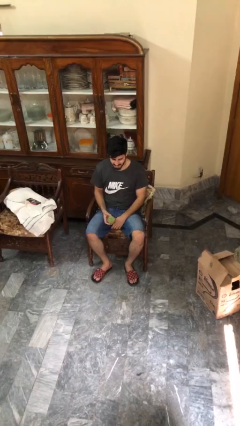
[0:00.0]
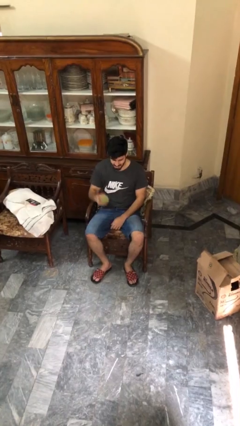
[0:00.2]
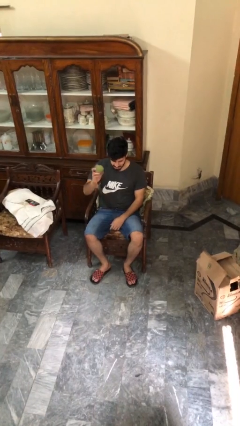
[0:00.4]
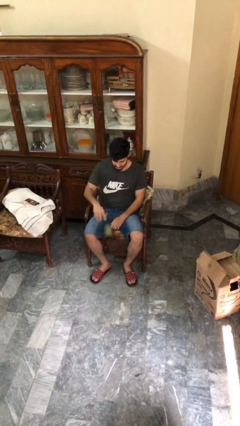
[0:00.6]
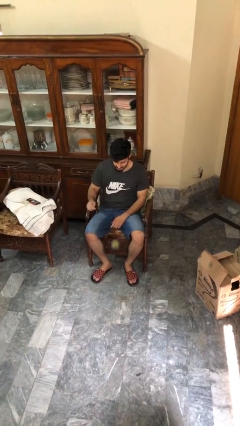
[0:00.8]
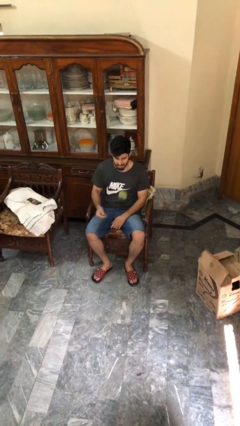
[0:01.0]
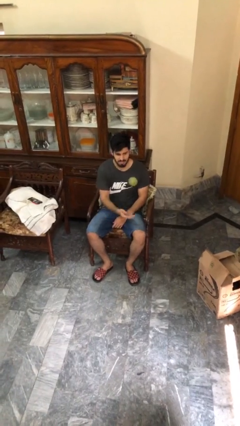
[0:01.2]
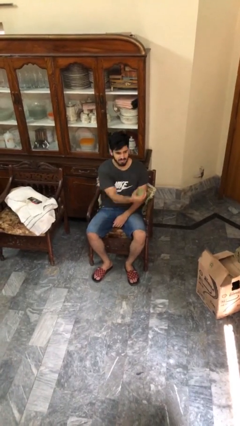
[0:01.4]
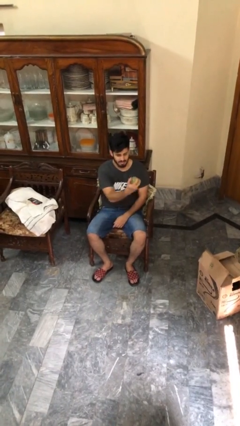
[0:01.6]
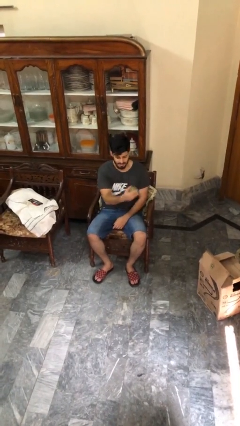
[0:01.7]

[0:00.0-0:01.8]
person bounces ball on floor

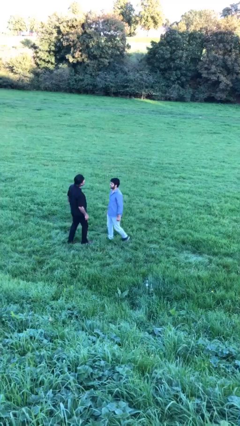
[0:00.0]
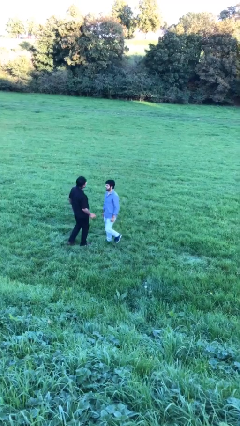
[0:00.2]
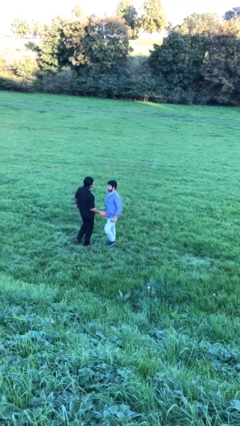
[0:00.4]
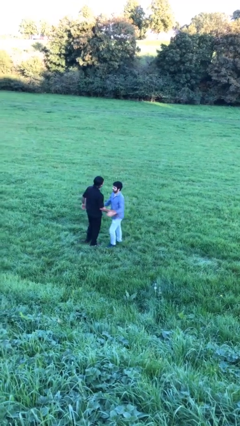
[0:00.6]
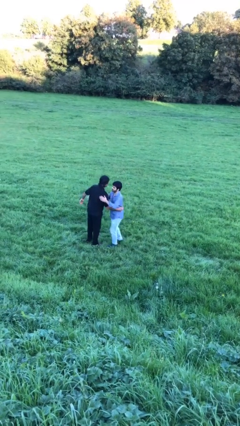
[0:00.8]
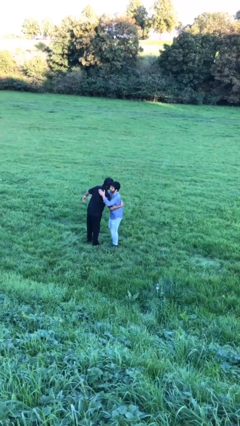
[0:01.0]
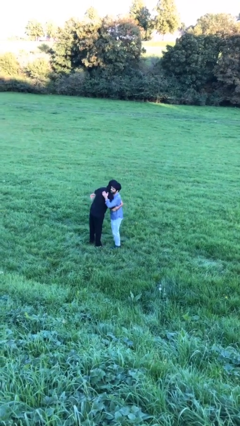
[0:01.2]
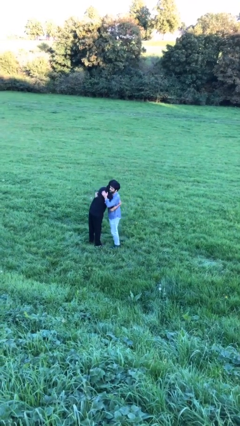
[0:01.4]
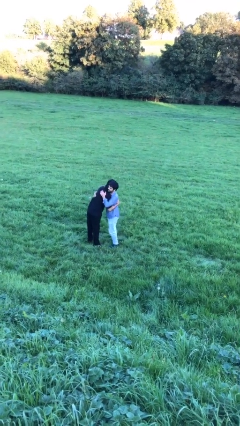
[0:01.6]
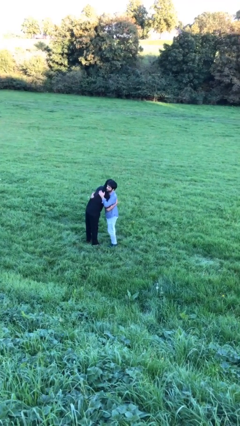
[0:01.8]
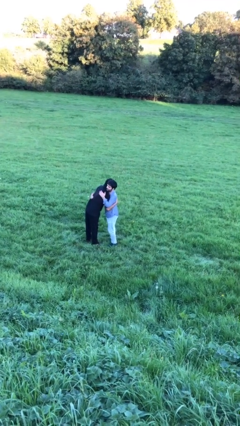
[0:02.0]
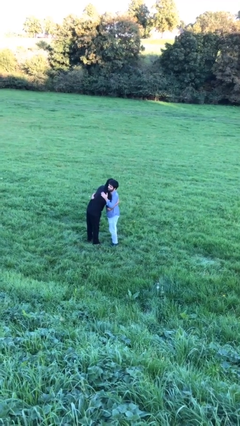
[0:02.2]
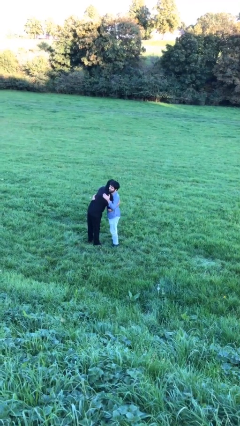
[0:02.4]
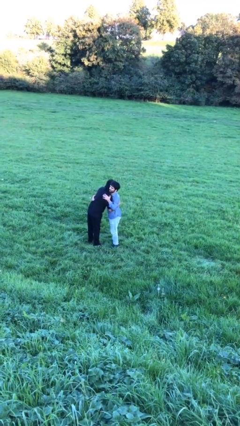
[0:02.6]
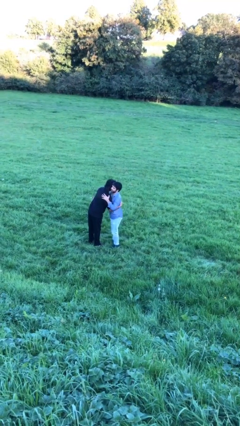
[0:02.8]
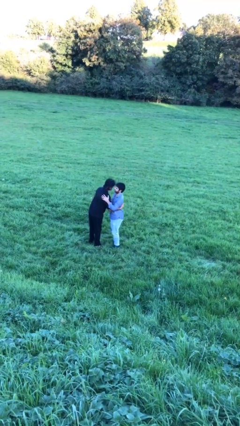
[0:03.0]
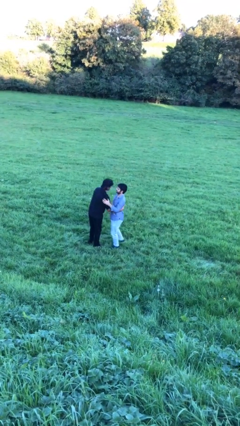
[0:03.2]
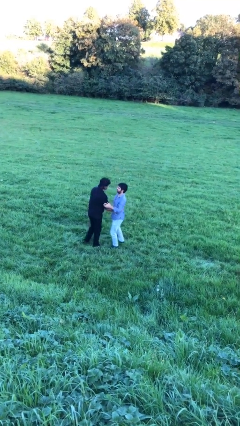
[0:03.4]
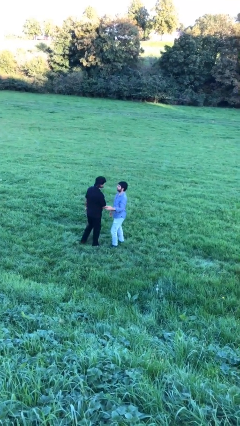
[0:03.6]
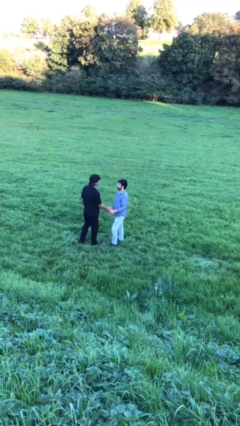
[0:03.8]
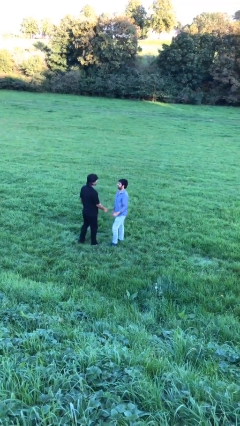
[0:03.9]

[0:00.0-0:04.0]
person embraces person

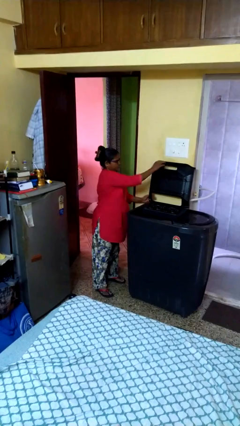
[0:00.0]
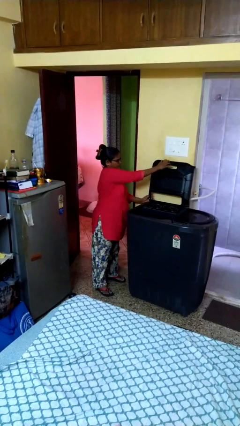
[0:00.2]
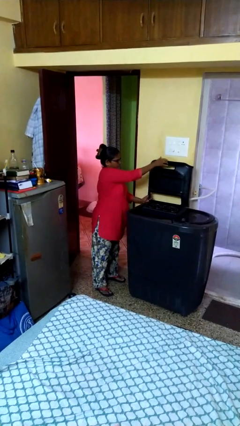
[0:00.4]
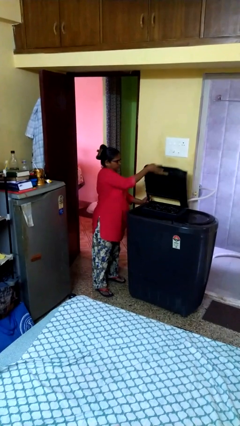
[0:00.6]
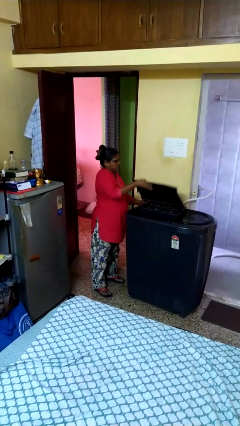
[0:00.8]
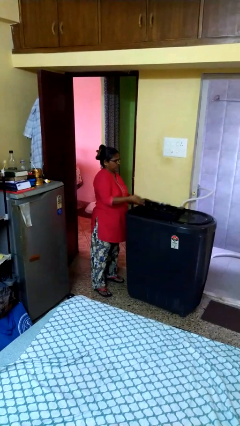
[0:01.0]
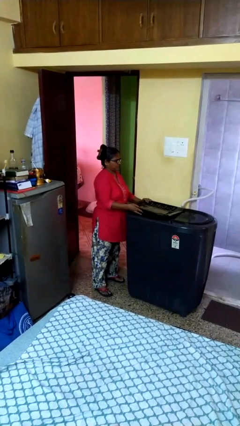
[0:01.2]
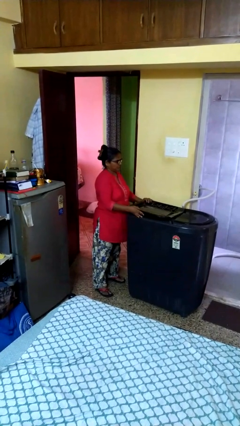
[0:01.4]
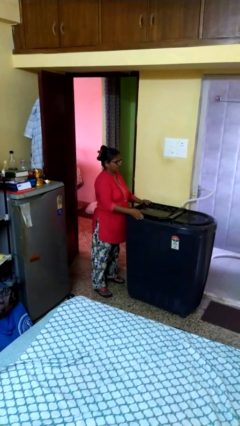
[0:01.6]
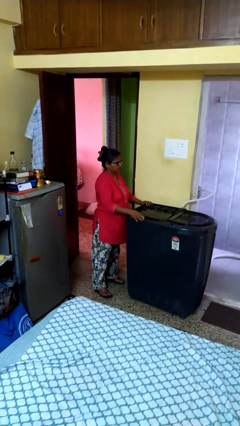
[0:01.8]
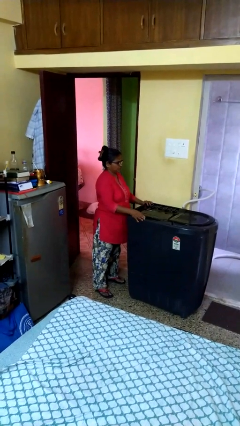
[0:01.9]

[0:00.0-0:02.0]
person closes clothes washer

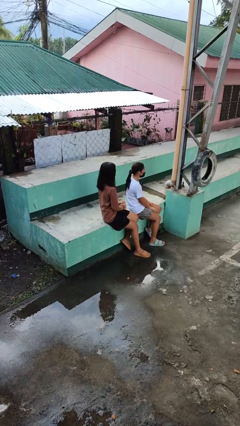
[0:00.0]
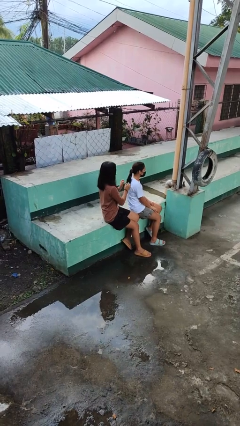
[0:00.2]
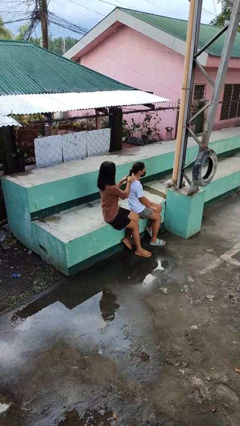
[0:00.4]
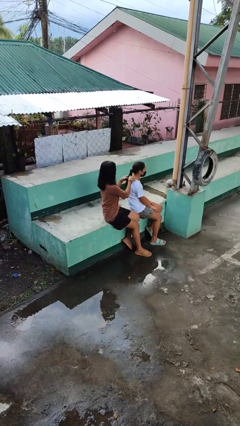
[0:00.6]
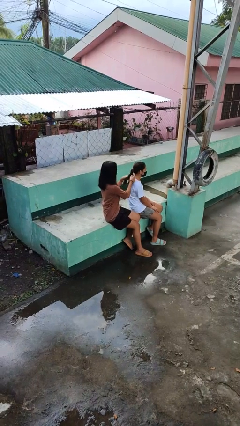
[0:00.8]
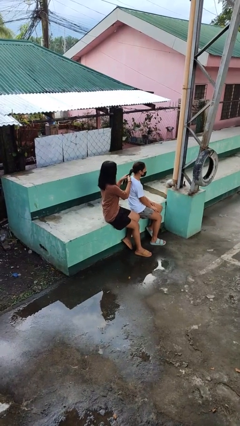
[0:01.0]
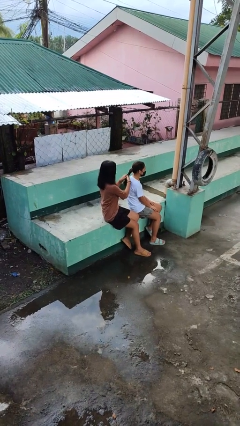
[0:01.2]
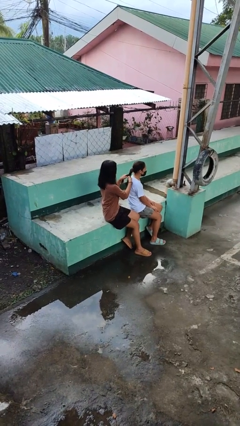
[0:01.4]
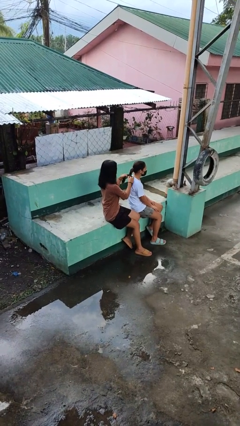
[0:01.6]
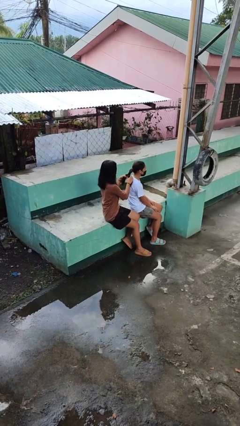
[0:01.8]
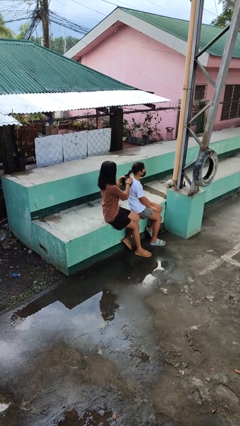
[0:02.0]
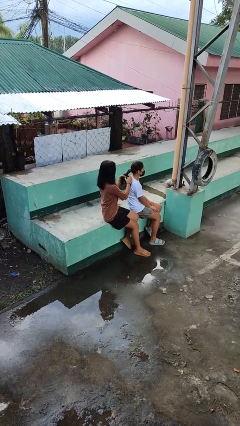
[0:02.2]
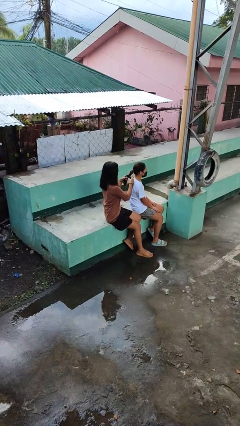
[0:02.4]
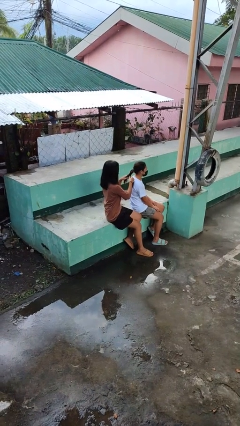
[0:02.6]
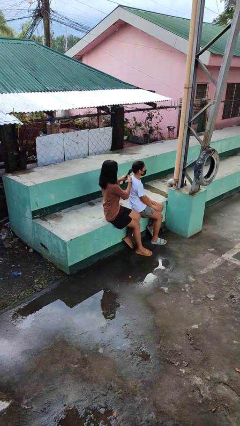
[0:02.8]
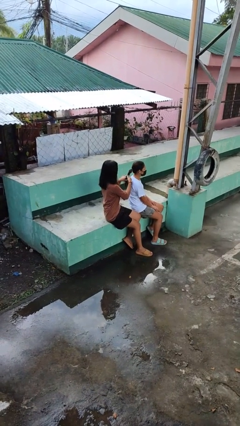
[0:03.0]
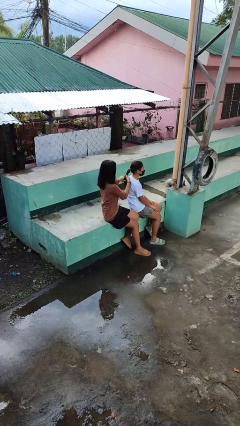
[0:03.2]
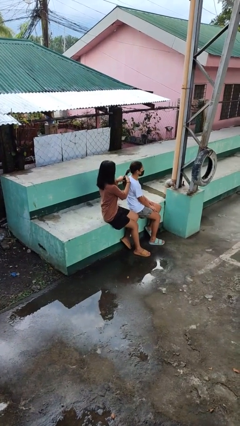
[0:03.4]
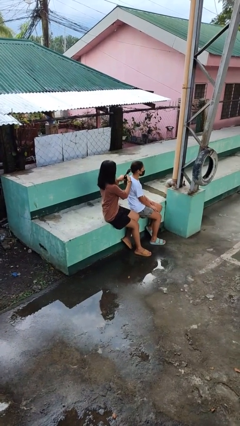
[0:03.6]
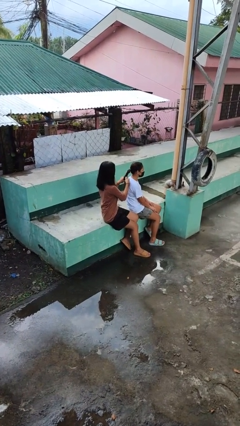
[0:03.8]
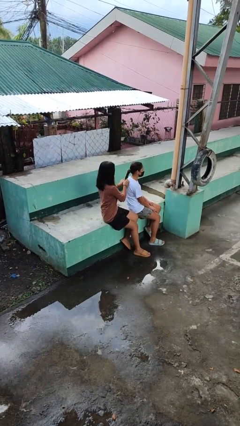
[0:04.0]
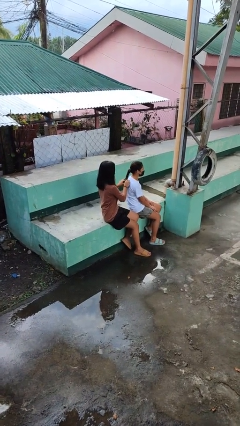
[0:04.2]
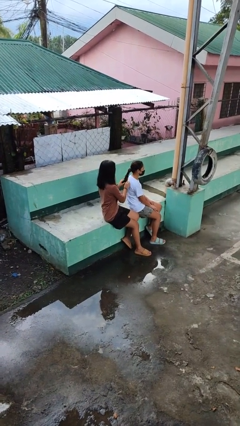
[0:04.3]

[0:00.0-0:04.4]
person braids hair of person

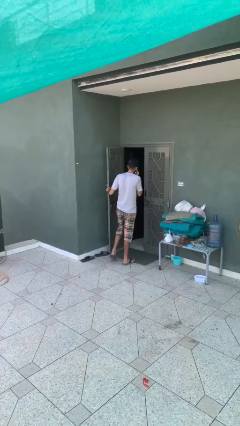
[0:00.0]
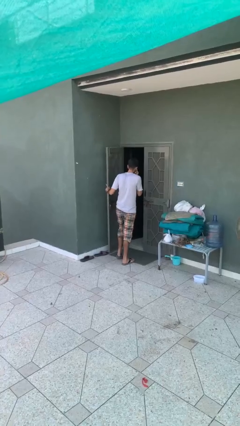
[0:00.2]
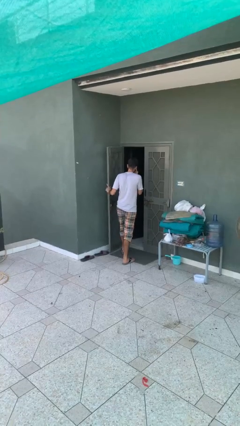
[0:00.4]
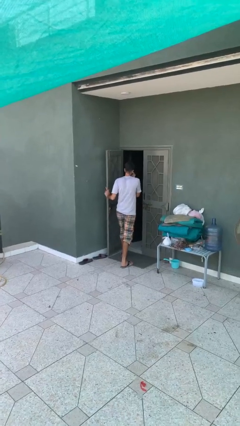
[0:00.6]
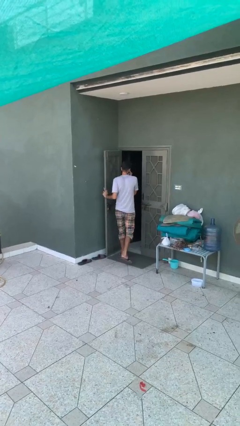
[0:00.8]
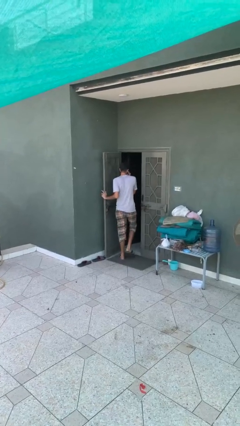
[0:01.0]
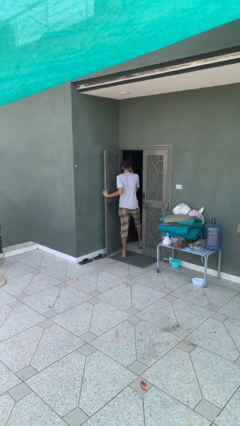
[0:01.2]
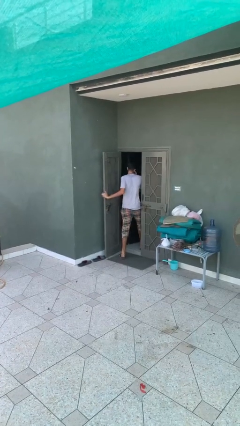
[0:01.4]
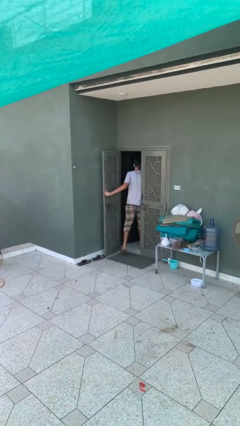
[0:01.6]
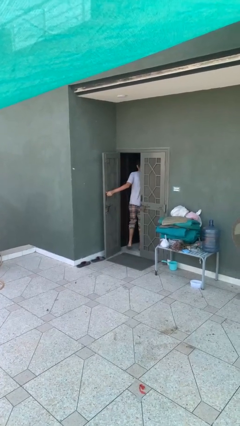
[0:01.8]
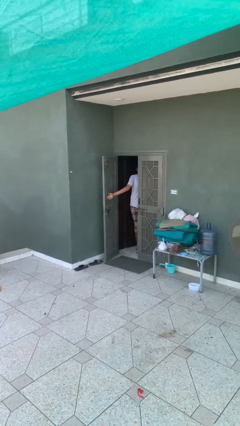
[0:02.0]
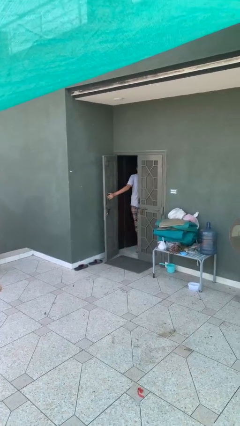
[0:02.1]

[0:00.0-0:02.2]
person exits scene through structure

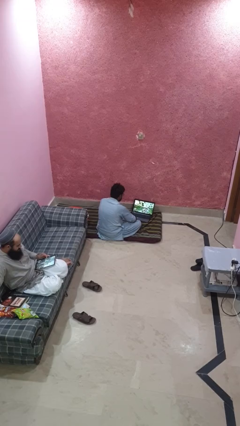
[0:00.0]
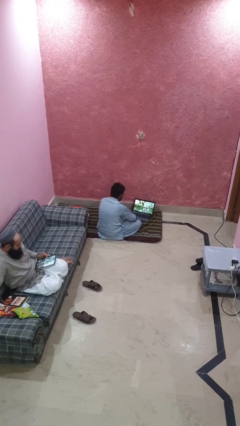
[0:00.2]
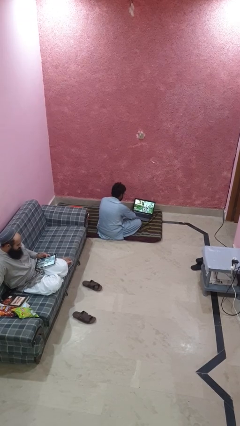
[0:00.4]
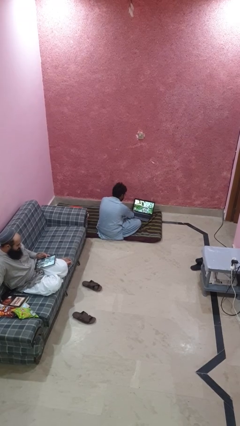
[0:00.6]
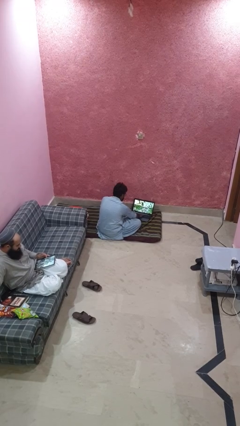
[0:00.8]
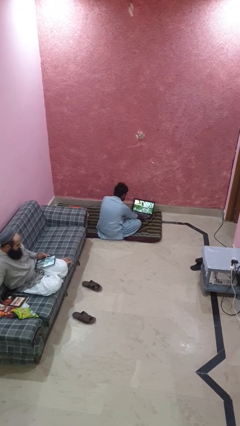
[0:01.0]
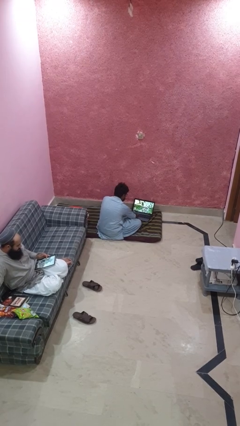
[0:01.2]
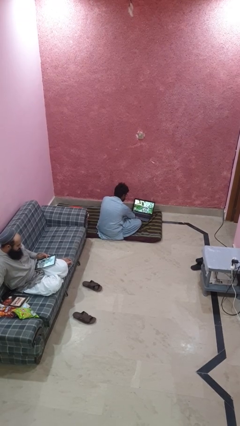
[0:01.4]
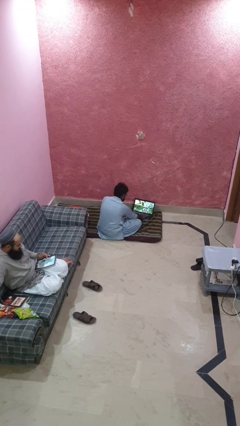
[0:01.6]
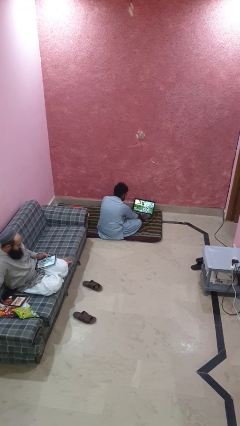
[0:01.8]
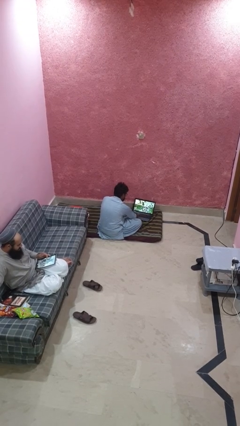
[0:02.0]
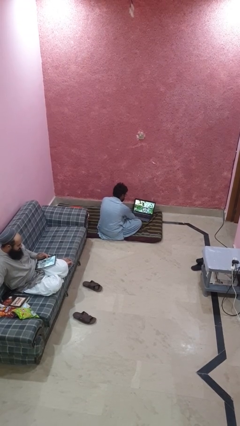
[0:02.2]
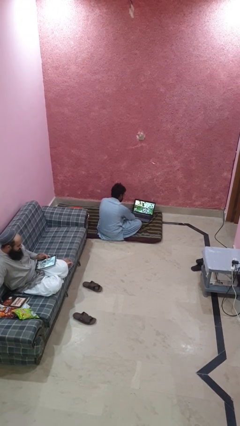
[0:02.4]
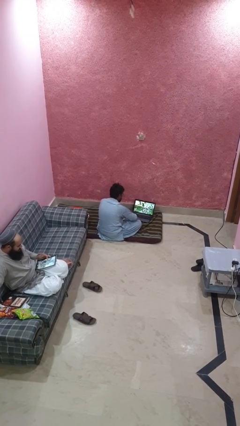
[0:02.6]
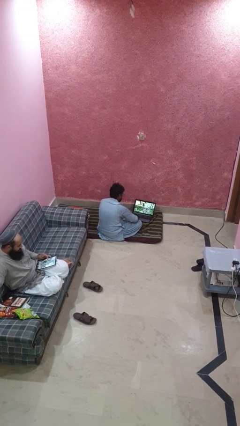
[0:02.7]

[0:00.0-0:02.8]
person waves hand over object
